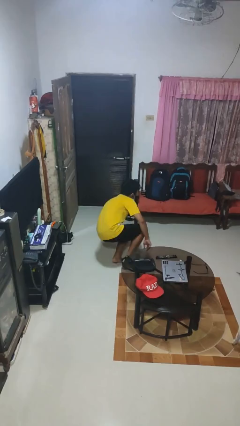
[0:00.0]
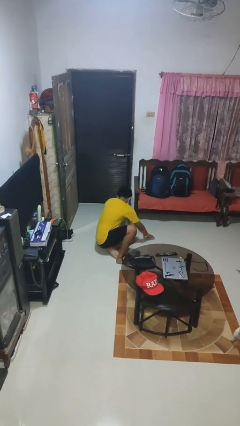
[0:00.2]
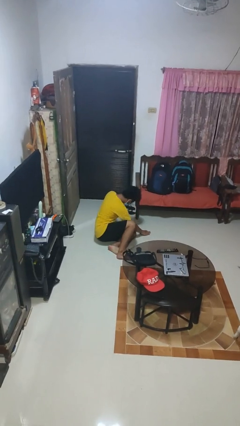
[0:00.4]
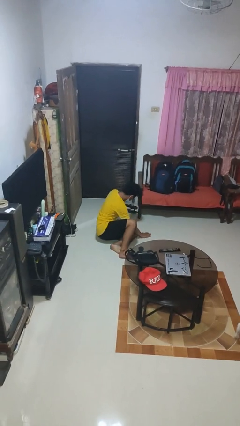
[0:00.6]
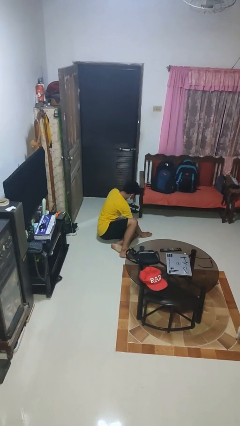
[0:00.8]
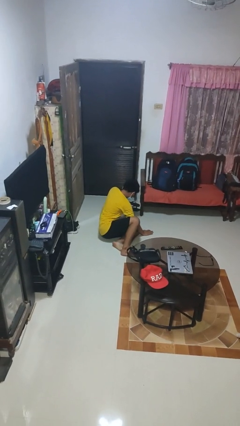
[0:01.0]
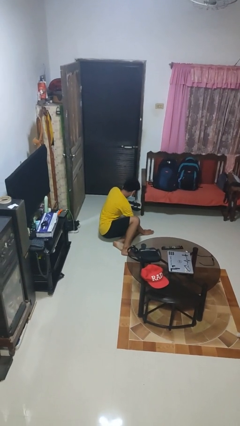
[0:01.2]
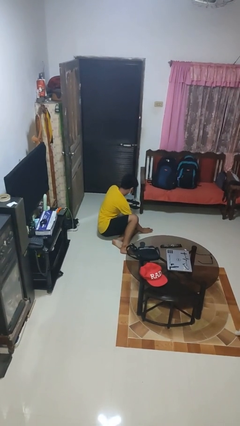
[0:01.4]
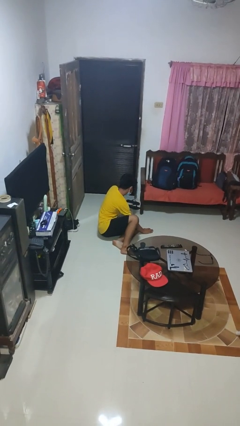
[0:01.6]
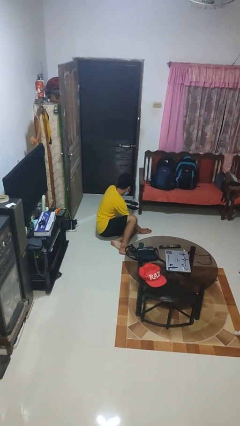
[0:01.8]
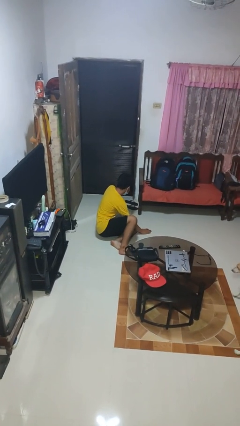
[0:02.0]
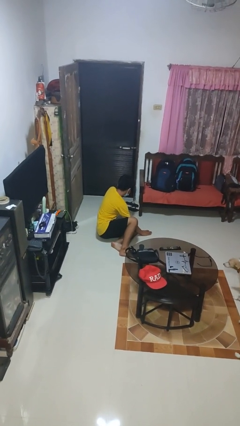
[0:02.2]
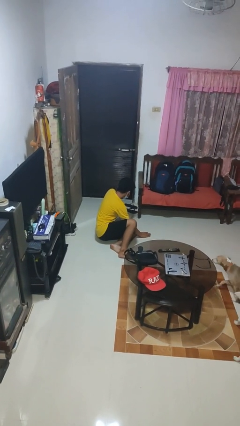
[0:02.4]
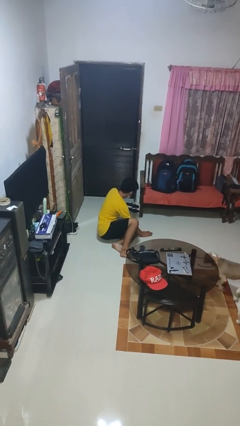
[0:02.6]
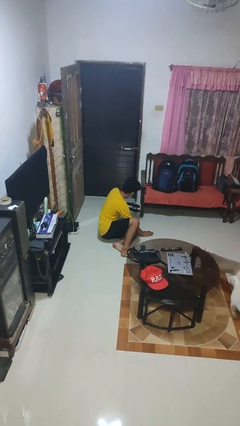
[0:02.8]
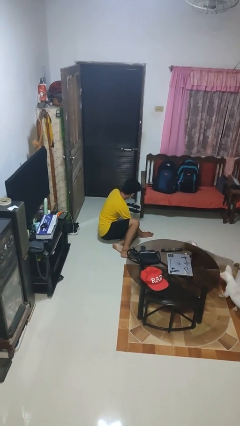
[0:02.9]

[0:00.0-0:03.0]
person lies down on floor

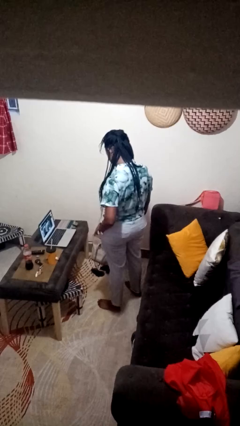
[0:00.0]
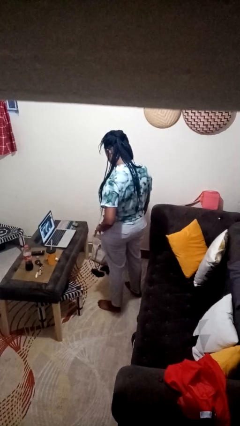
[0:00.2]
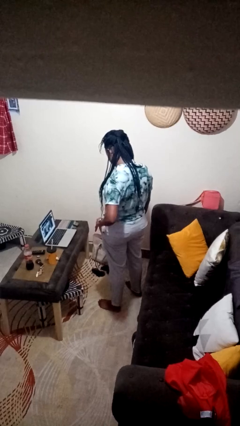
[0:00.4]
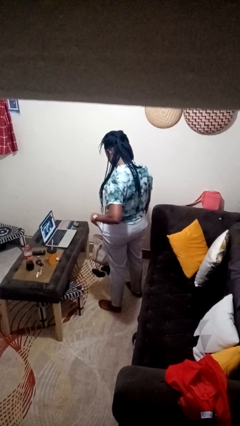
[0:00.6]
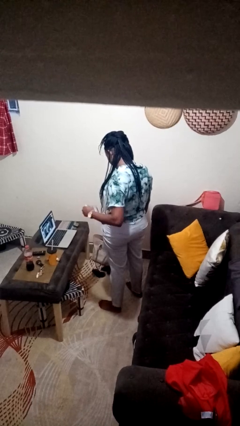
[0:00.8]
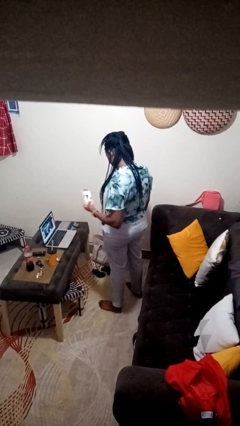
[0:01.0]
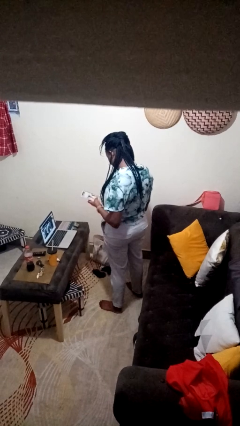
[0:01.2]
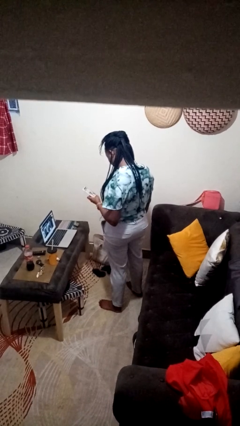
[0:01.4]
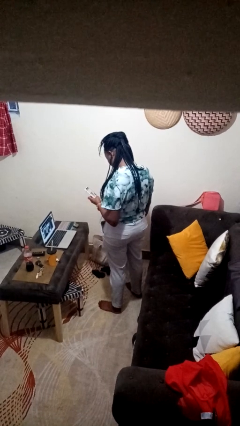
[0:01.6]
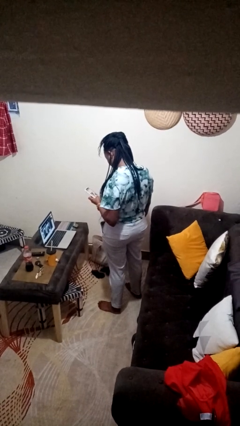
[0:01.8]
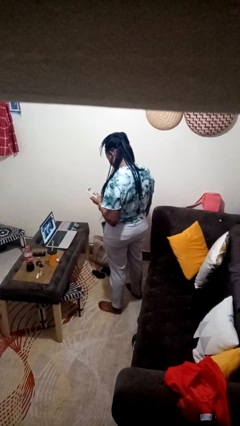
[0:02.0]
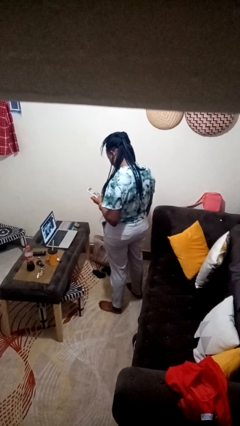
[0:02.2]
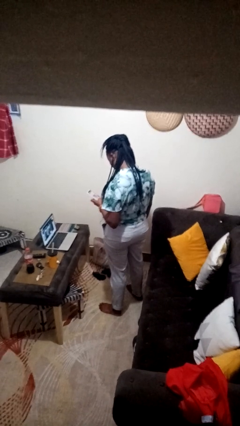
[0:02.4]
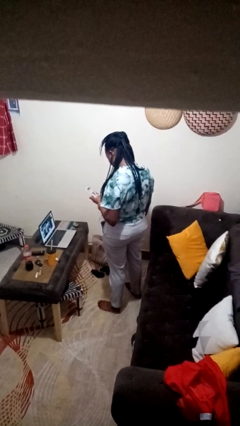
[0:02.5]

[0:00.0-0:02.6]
person takes phone from pocket

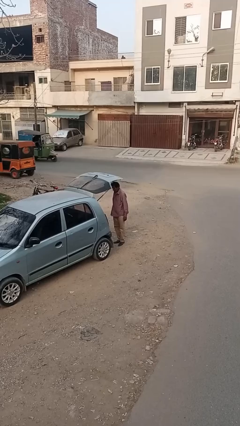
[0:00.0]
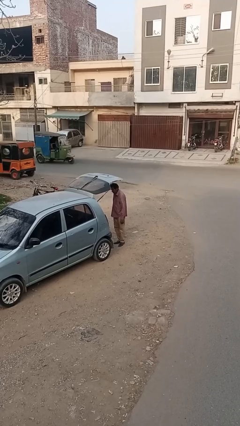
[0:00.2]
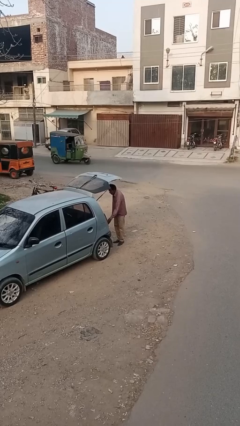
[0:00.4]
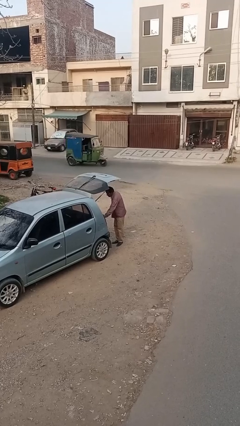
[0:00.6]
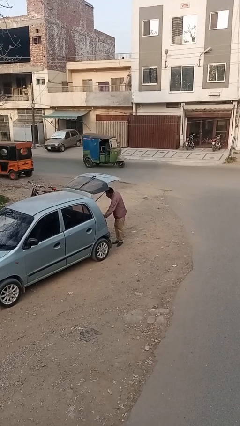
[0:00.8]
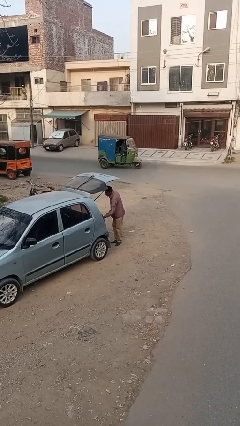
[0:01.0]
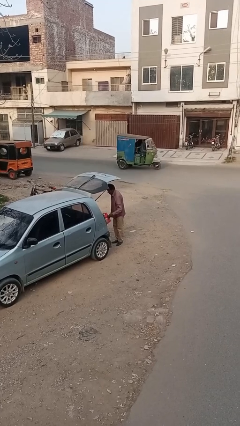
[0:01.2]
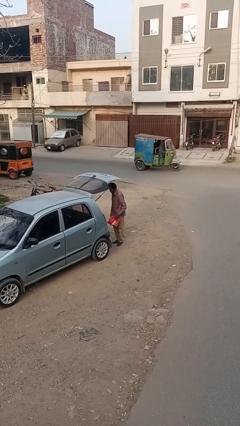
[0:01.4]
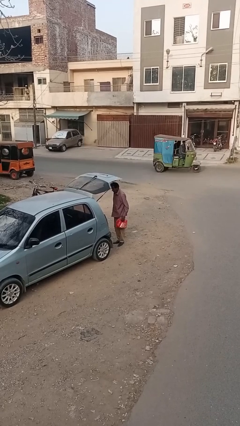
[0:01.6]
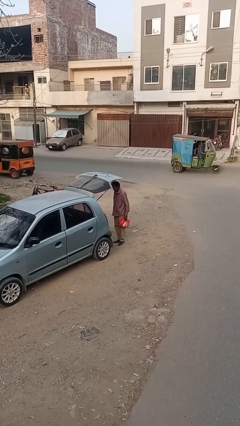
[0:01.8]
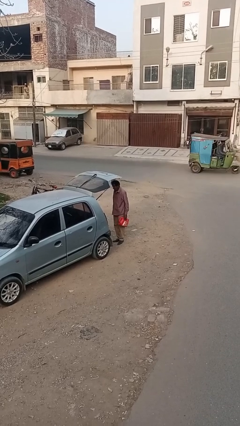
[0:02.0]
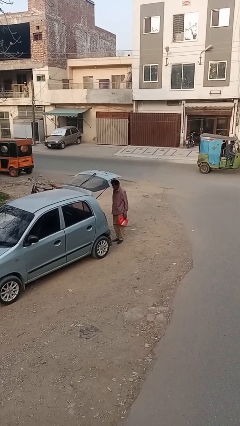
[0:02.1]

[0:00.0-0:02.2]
person unloads car

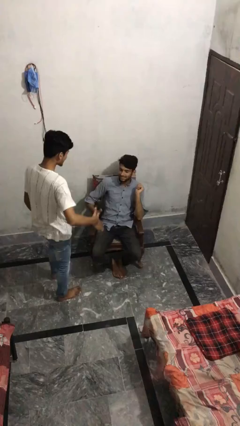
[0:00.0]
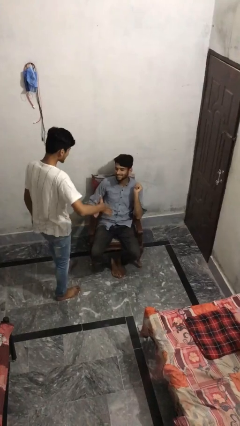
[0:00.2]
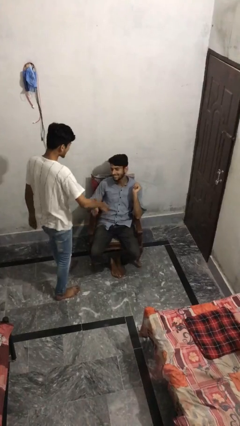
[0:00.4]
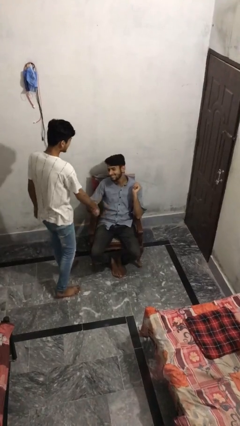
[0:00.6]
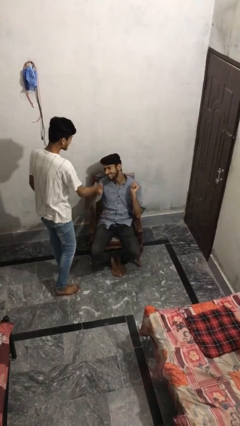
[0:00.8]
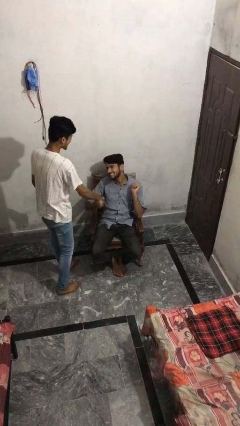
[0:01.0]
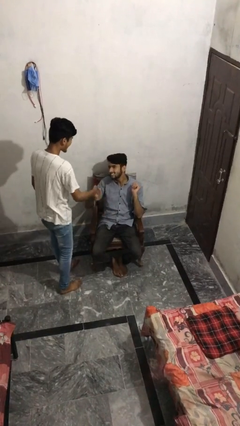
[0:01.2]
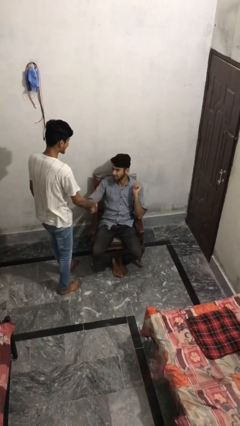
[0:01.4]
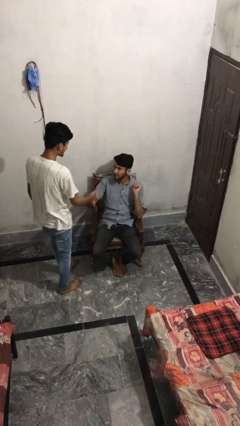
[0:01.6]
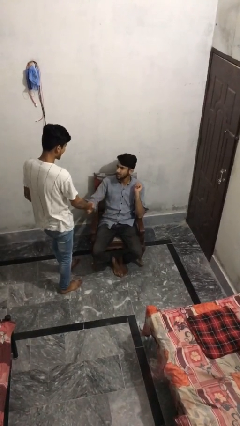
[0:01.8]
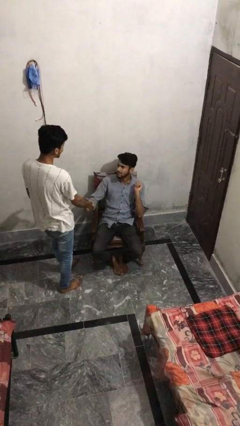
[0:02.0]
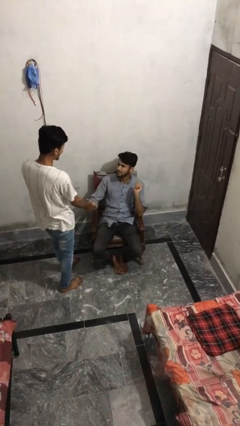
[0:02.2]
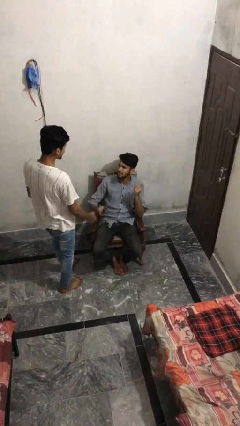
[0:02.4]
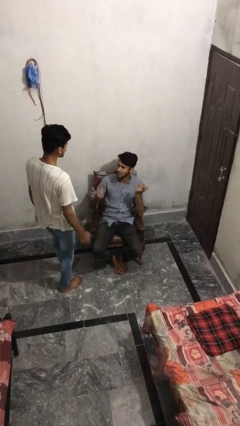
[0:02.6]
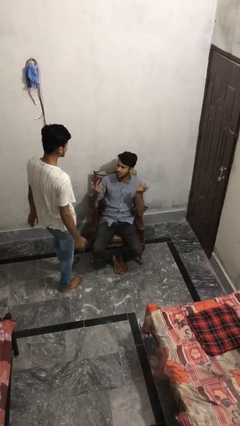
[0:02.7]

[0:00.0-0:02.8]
person shakes hand

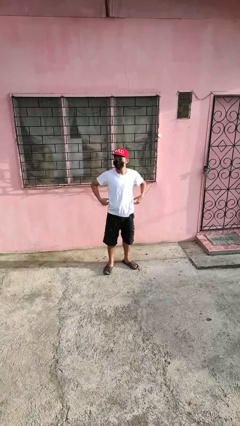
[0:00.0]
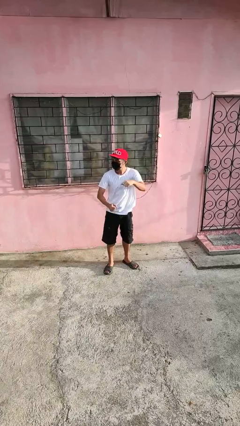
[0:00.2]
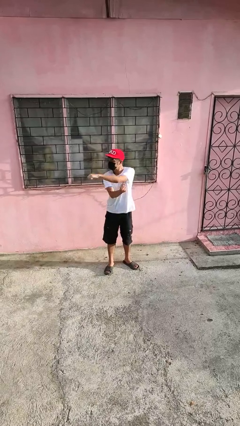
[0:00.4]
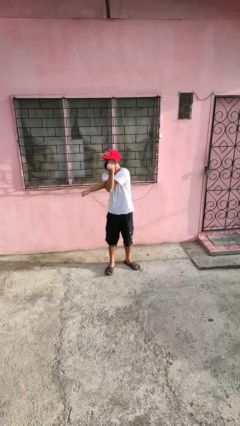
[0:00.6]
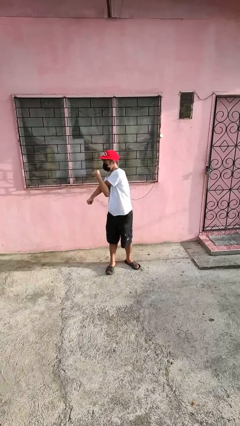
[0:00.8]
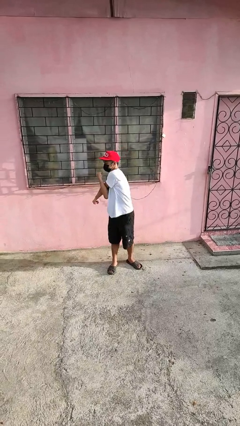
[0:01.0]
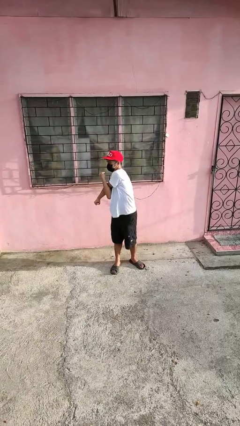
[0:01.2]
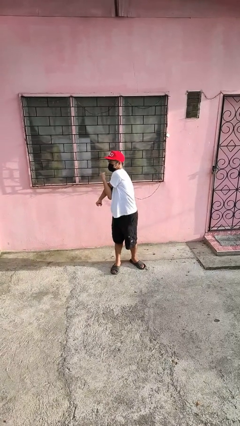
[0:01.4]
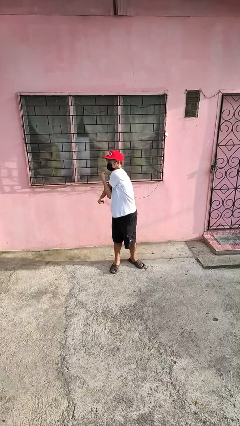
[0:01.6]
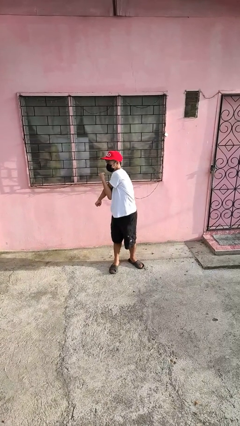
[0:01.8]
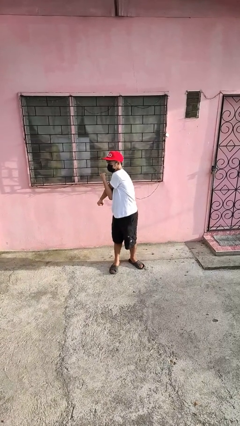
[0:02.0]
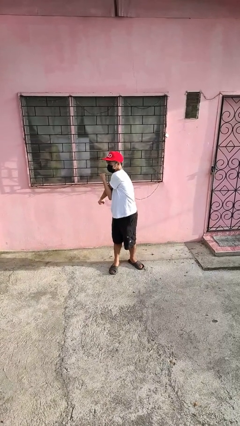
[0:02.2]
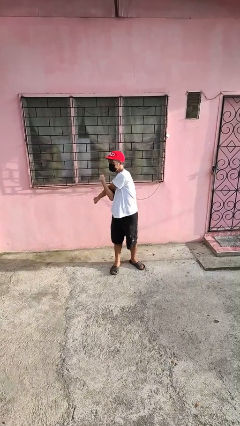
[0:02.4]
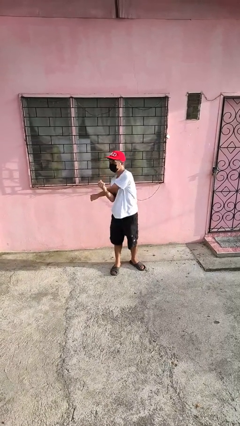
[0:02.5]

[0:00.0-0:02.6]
person stretches arms to side

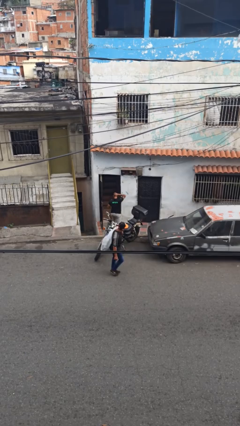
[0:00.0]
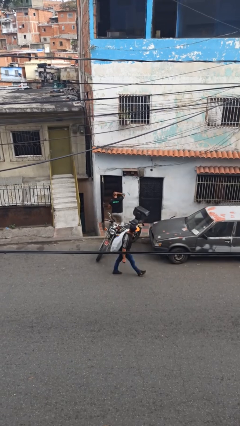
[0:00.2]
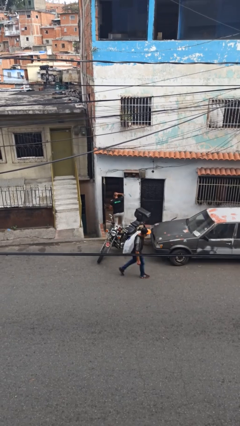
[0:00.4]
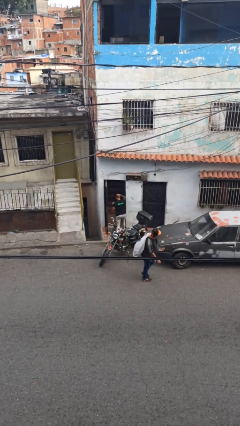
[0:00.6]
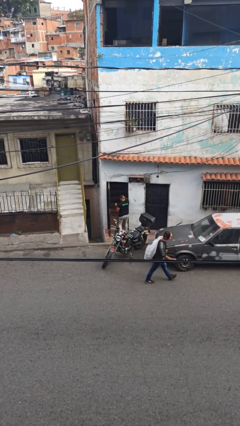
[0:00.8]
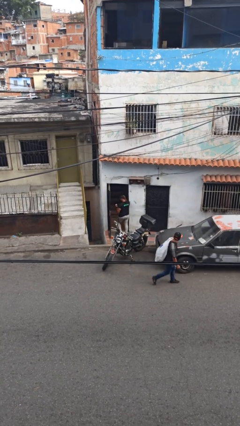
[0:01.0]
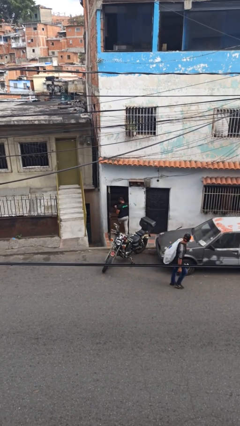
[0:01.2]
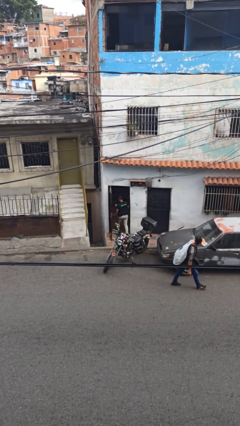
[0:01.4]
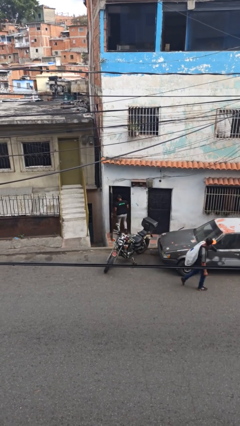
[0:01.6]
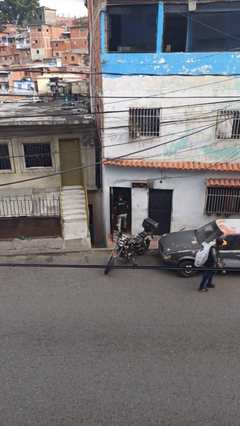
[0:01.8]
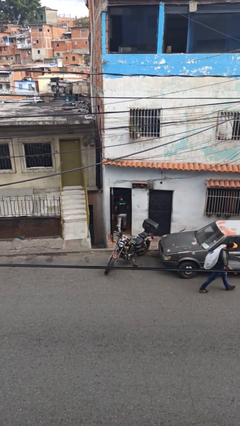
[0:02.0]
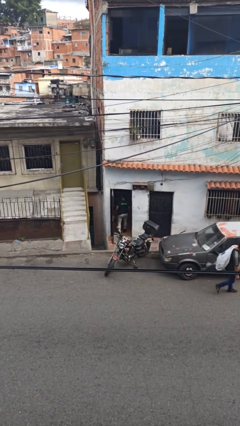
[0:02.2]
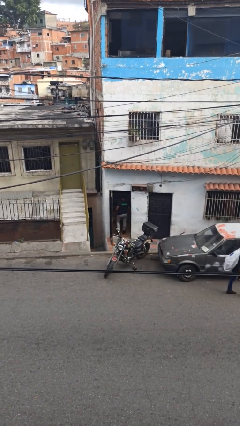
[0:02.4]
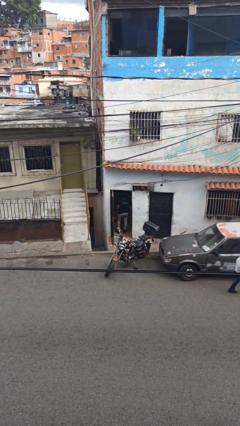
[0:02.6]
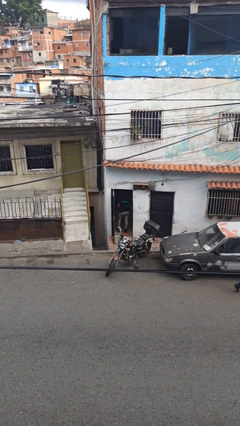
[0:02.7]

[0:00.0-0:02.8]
person exits scene through structure

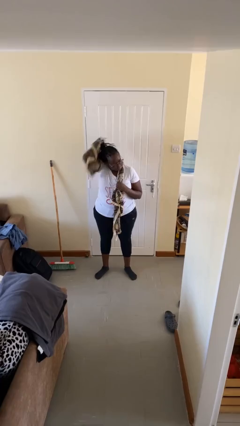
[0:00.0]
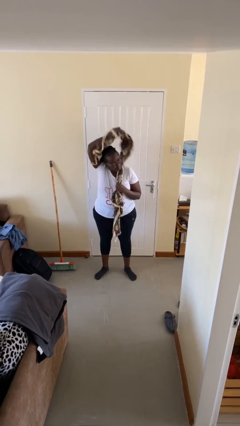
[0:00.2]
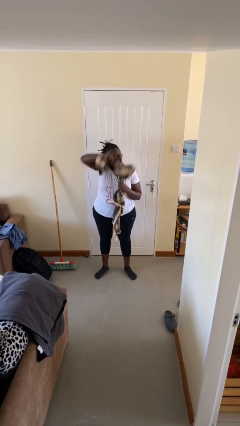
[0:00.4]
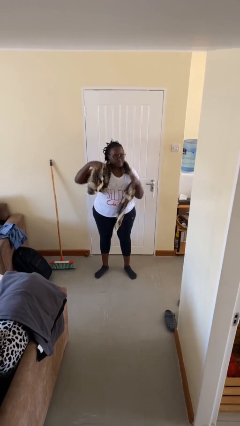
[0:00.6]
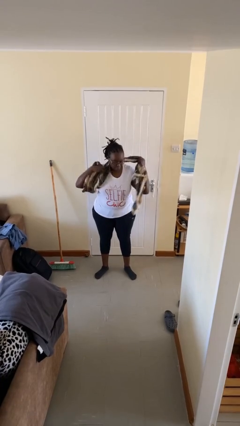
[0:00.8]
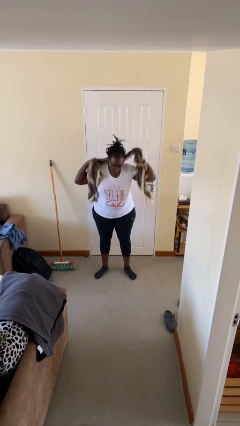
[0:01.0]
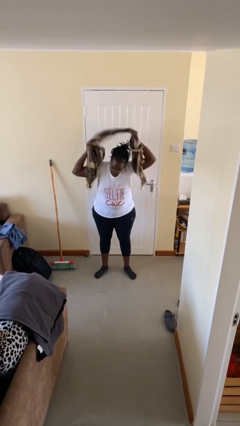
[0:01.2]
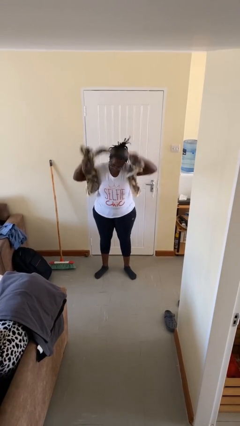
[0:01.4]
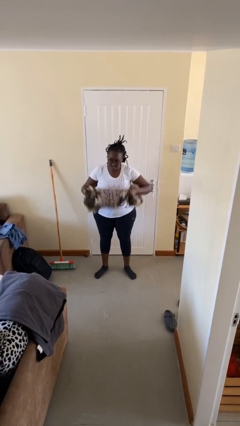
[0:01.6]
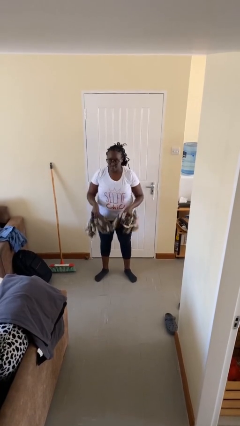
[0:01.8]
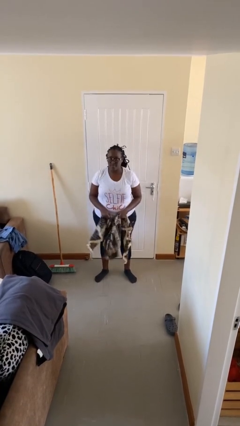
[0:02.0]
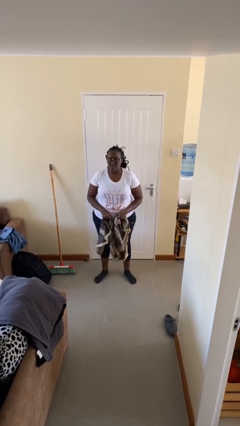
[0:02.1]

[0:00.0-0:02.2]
person takes off scarf
